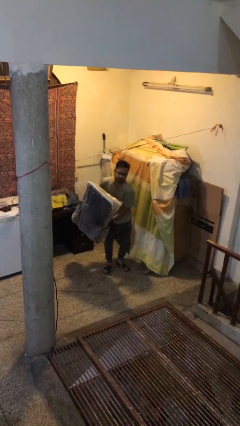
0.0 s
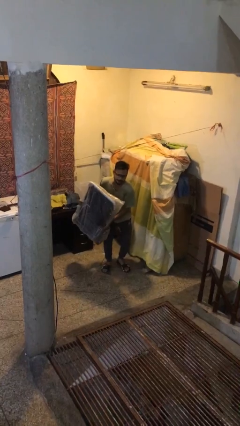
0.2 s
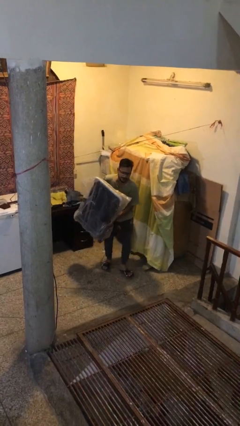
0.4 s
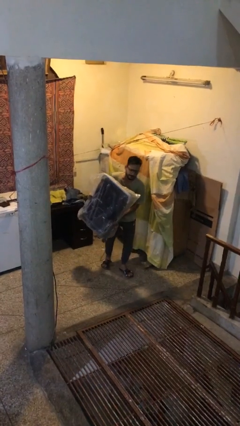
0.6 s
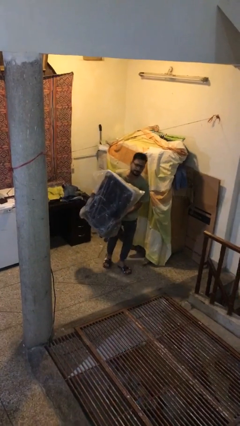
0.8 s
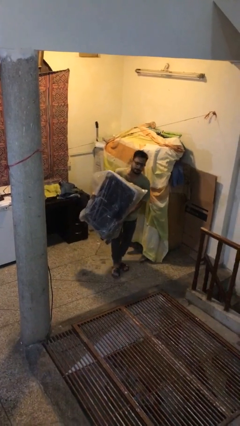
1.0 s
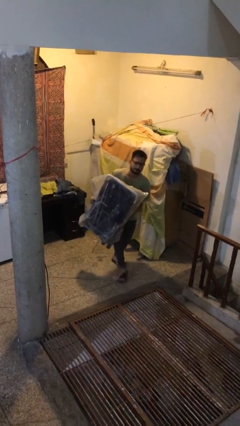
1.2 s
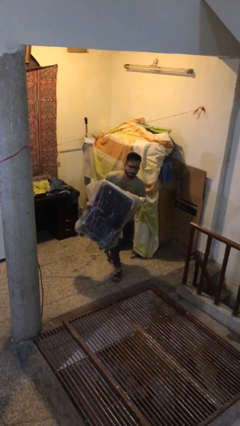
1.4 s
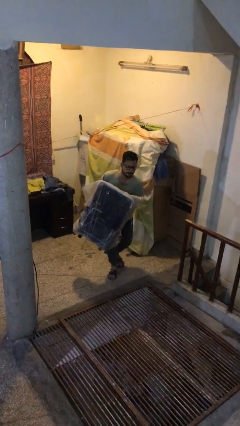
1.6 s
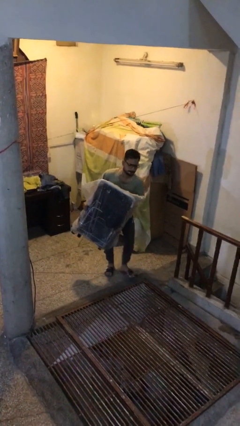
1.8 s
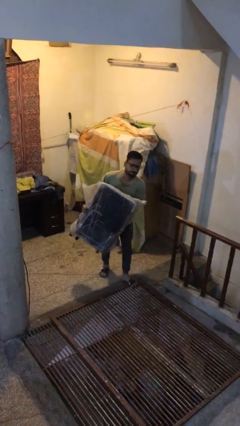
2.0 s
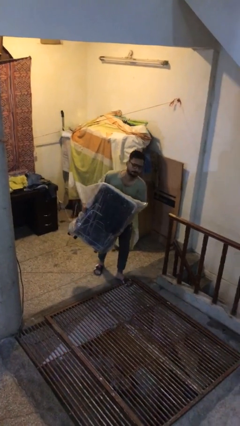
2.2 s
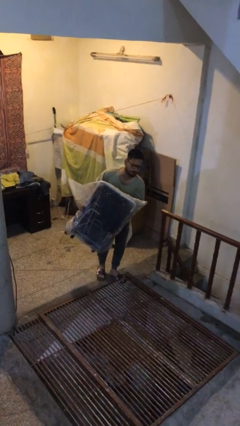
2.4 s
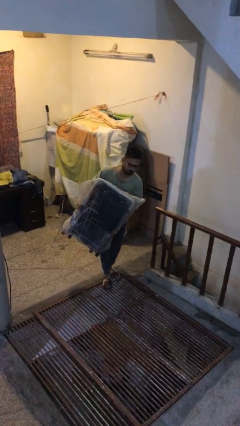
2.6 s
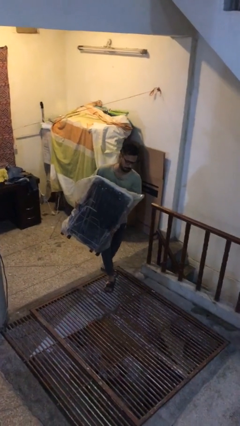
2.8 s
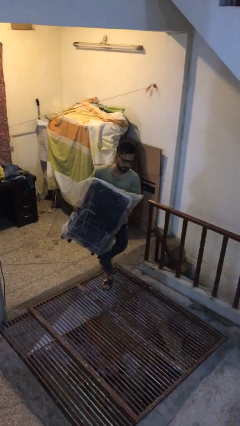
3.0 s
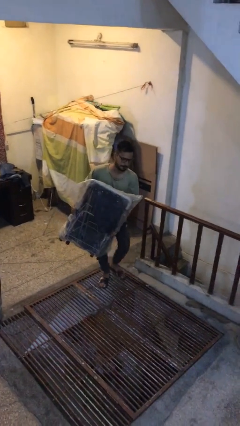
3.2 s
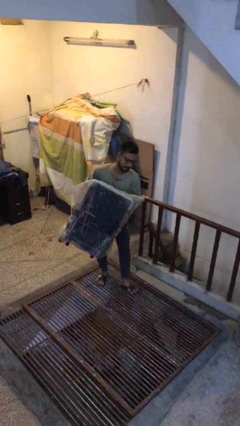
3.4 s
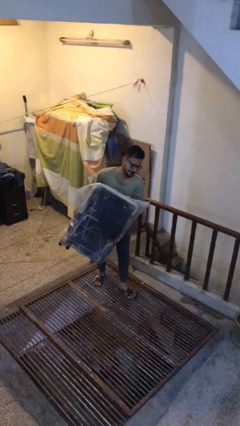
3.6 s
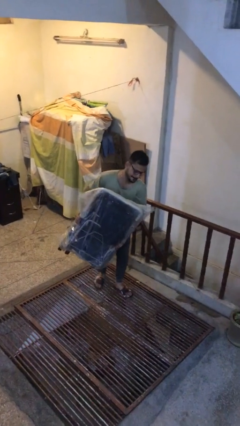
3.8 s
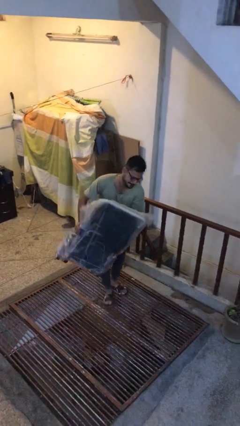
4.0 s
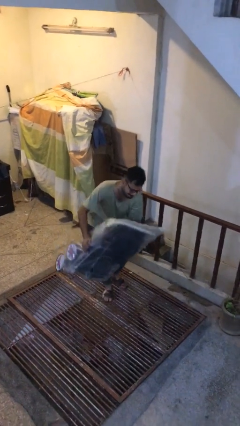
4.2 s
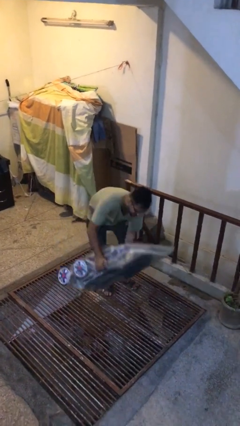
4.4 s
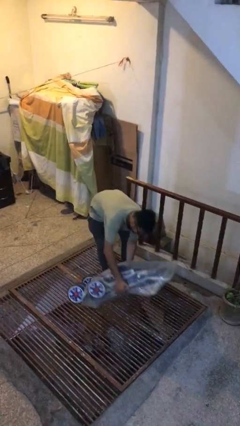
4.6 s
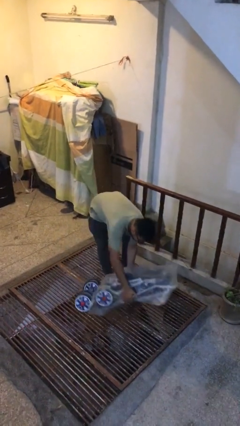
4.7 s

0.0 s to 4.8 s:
person carries heavy object

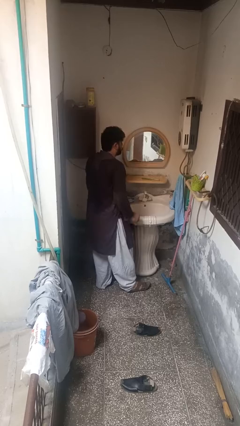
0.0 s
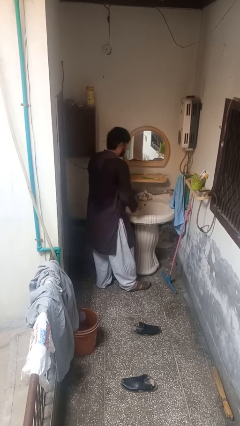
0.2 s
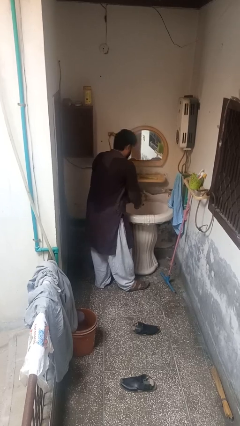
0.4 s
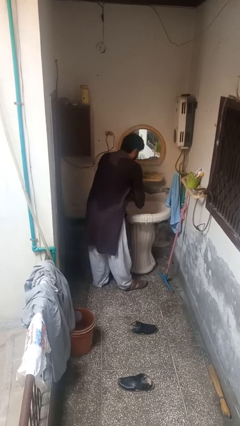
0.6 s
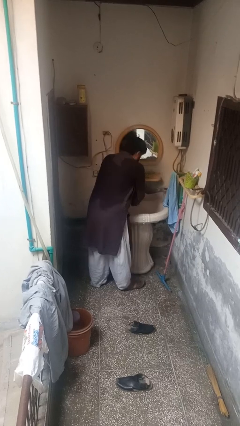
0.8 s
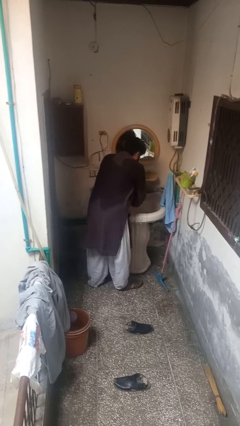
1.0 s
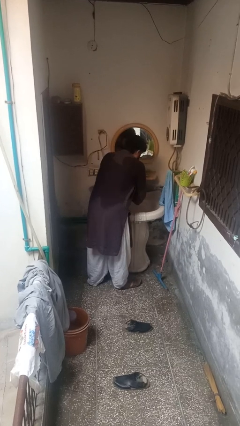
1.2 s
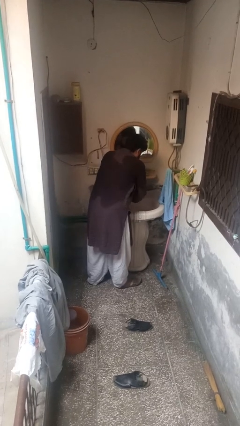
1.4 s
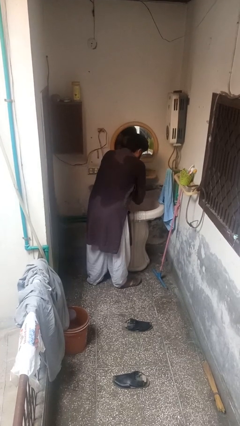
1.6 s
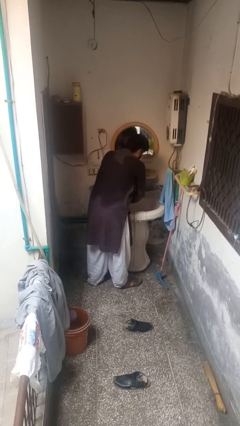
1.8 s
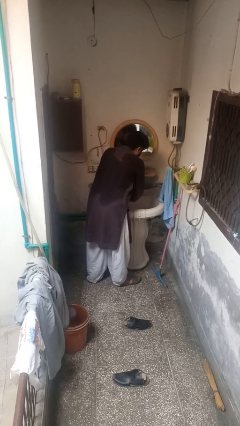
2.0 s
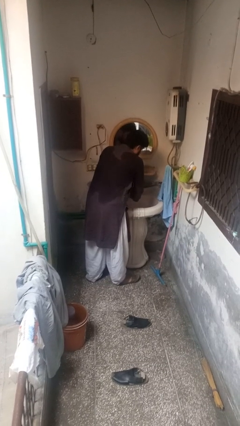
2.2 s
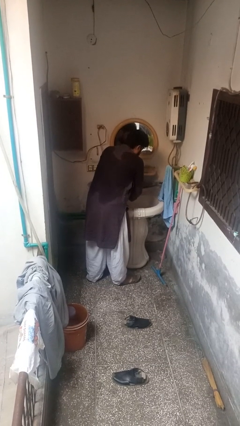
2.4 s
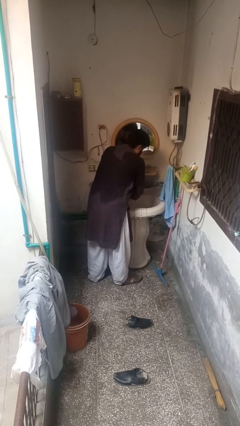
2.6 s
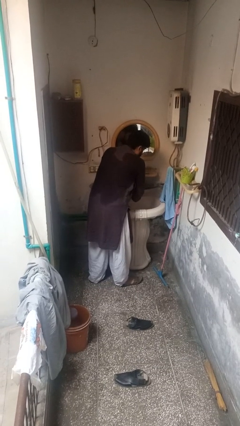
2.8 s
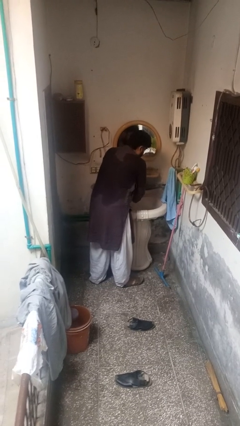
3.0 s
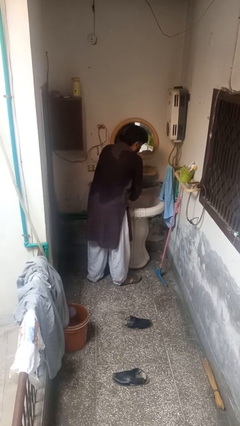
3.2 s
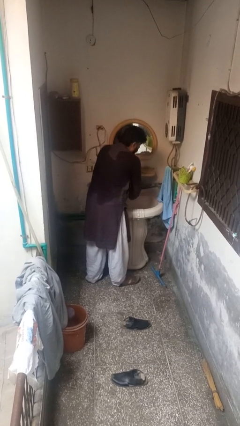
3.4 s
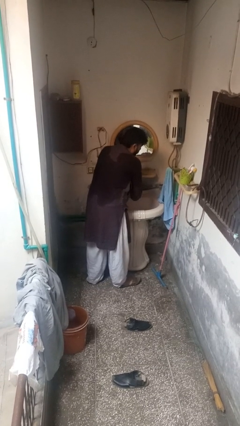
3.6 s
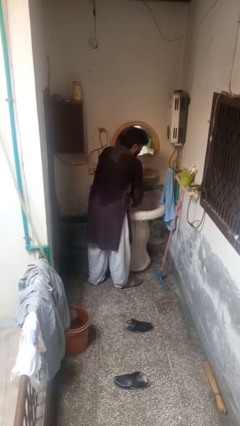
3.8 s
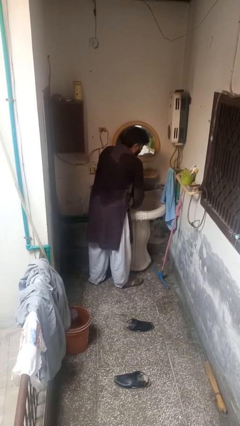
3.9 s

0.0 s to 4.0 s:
person washes hands

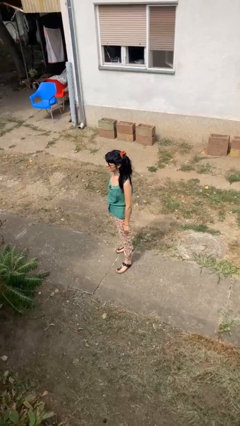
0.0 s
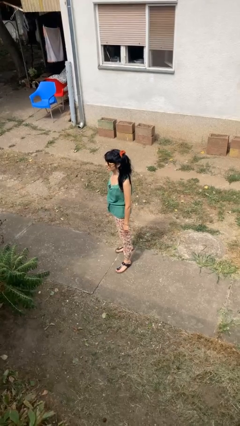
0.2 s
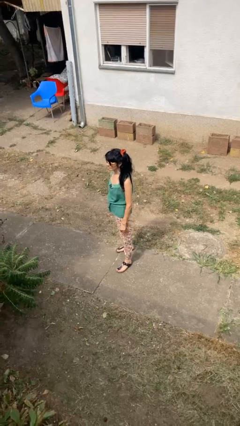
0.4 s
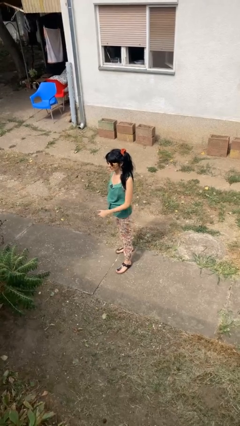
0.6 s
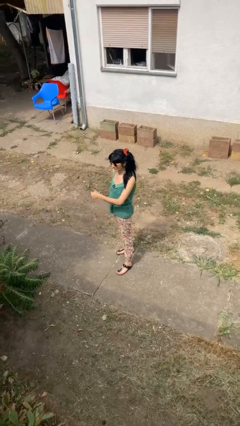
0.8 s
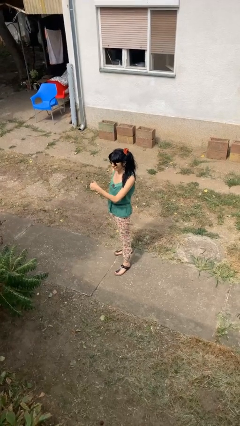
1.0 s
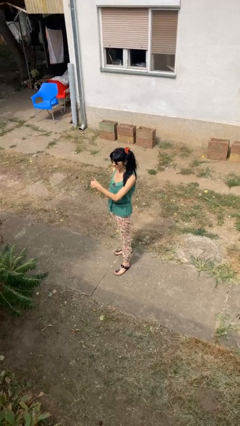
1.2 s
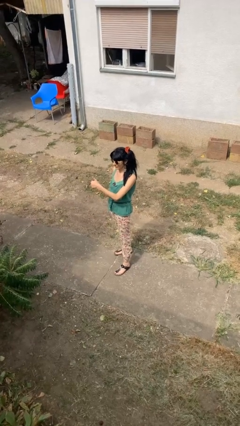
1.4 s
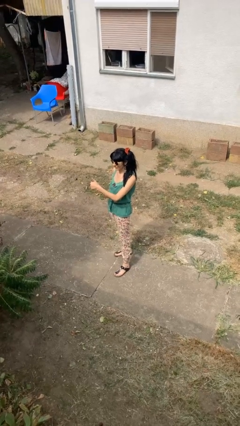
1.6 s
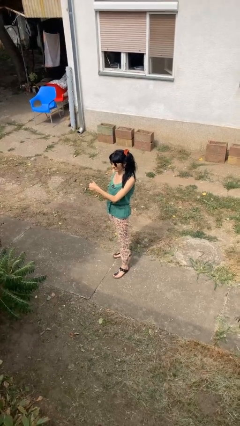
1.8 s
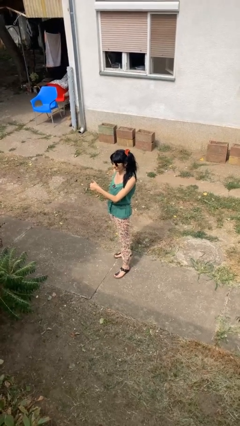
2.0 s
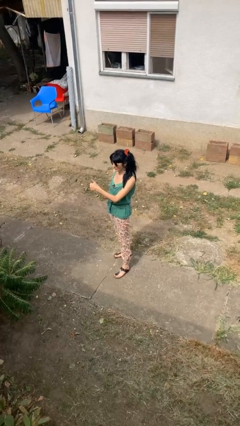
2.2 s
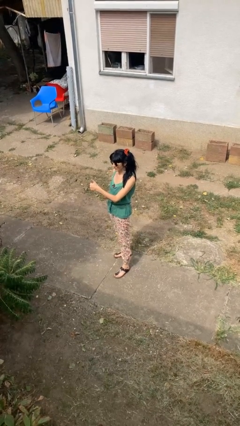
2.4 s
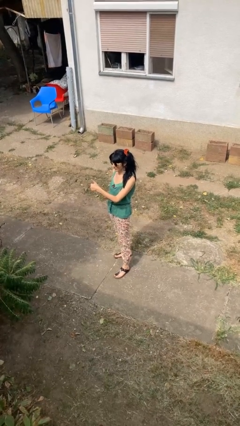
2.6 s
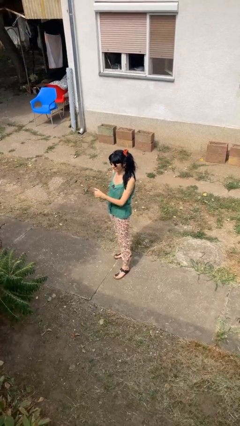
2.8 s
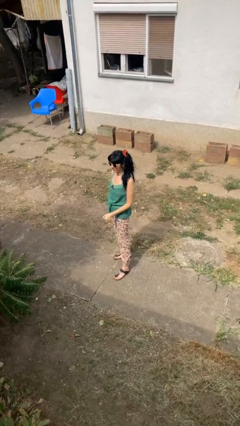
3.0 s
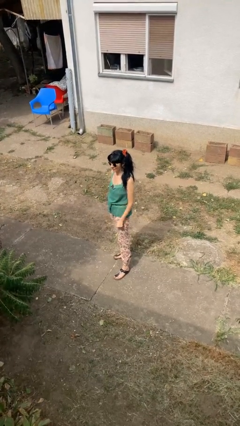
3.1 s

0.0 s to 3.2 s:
person gestures thumbs up

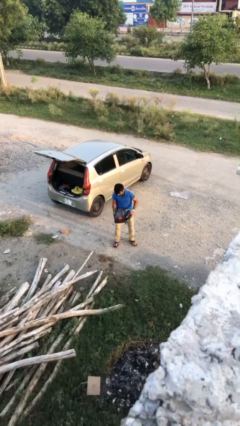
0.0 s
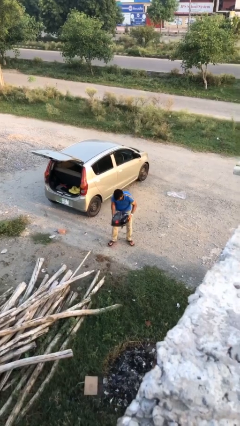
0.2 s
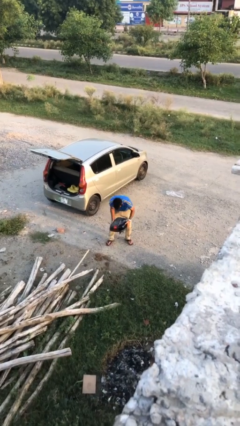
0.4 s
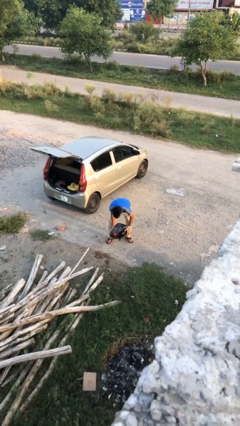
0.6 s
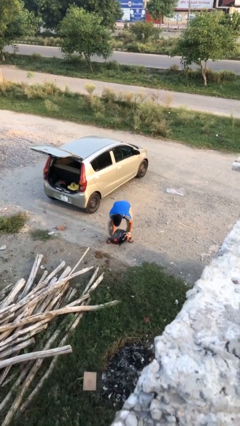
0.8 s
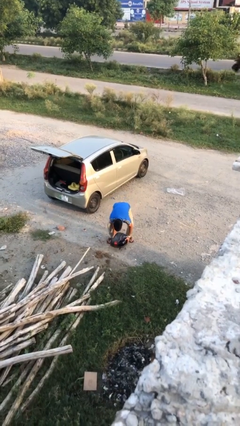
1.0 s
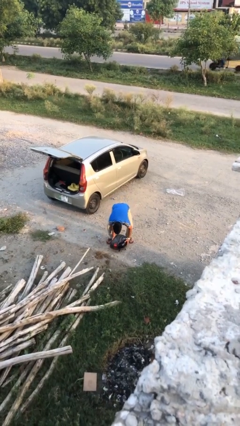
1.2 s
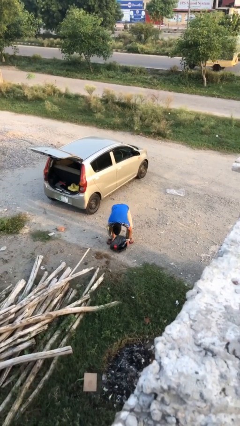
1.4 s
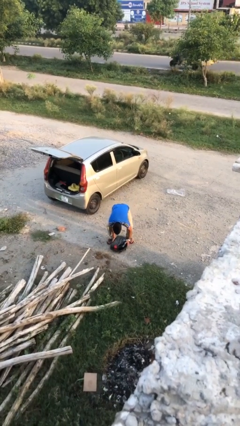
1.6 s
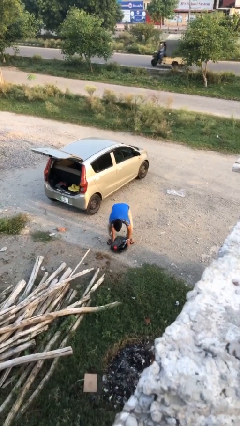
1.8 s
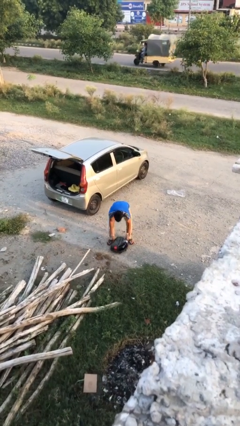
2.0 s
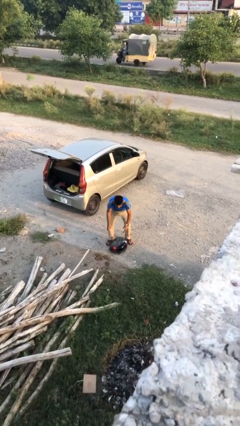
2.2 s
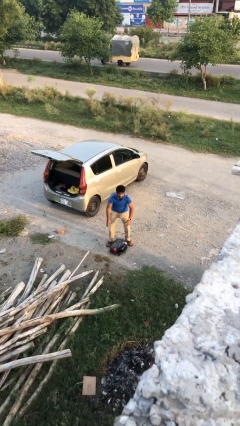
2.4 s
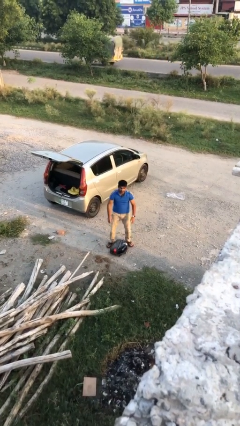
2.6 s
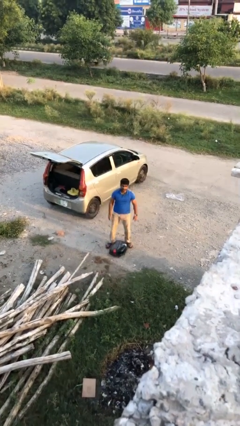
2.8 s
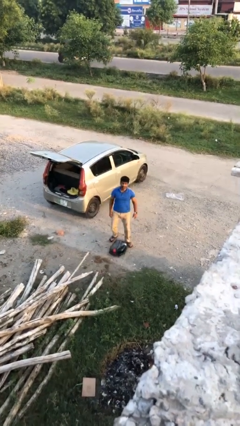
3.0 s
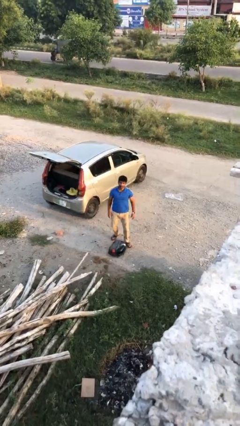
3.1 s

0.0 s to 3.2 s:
person puts down object on floor

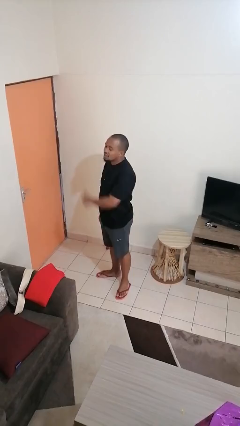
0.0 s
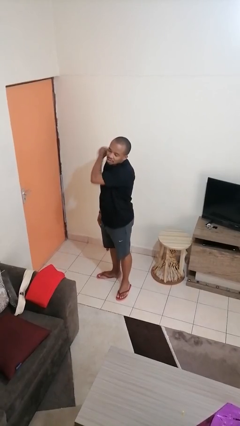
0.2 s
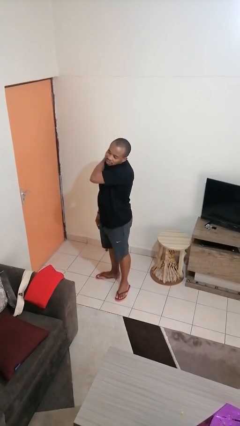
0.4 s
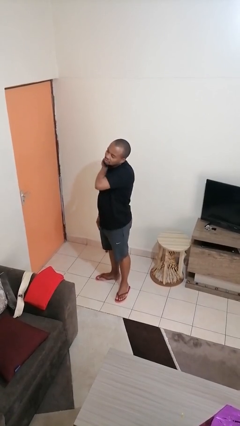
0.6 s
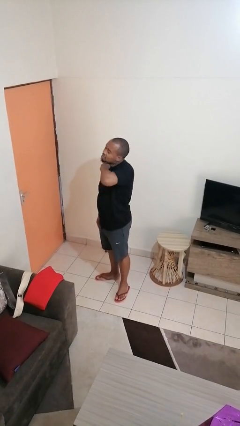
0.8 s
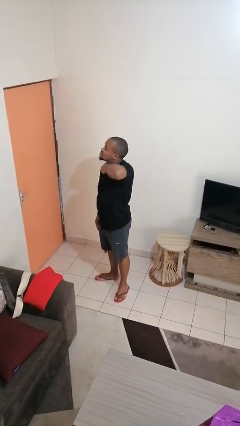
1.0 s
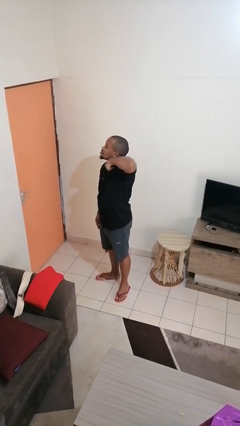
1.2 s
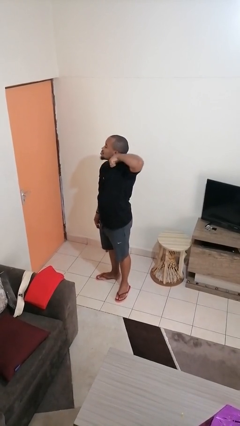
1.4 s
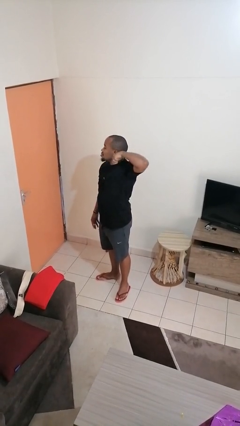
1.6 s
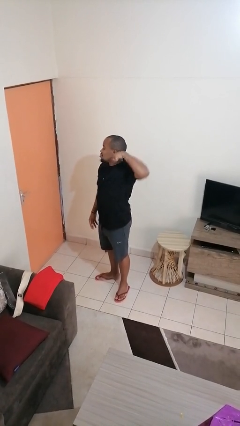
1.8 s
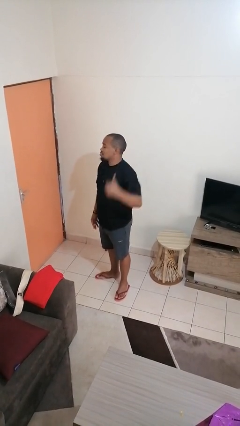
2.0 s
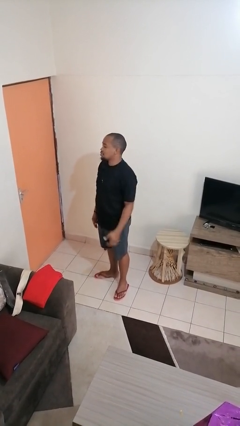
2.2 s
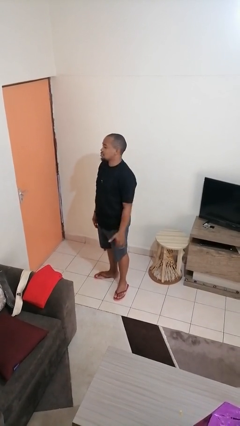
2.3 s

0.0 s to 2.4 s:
person gestures cut
